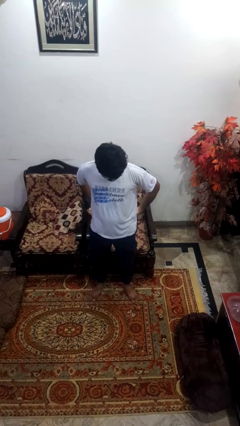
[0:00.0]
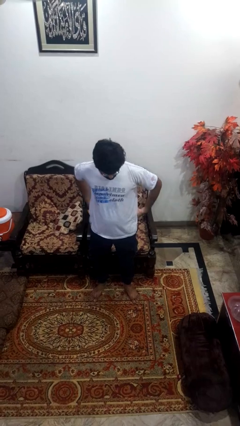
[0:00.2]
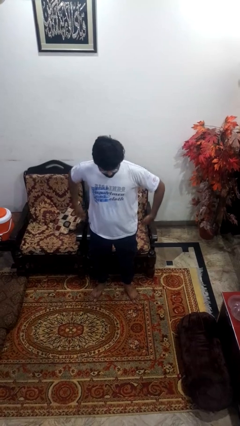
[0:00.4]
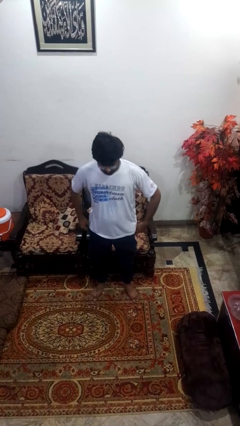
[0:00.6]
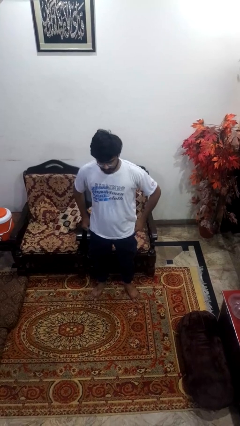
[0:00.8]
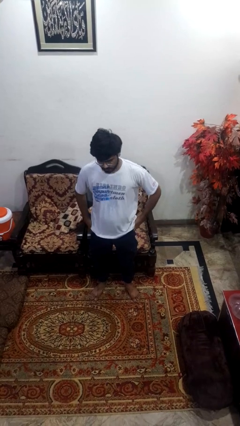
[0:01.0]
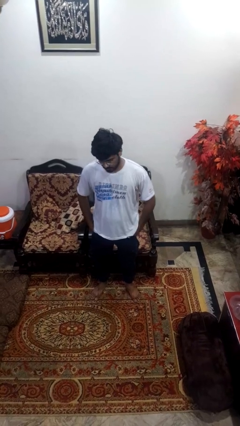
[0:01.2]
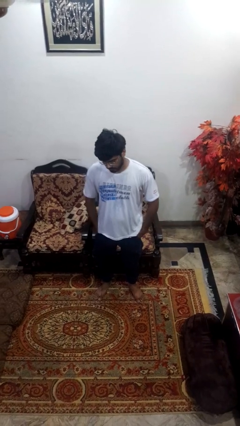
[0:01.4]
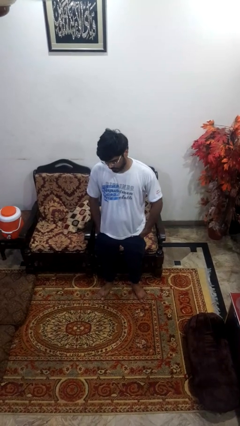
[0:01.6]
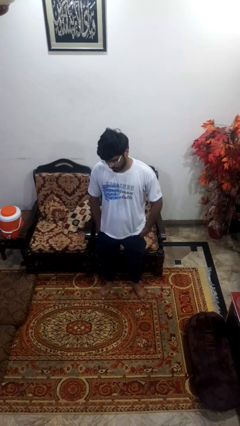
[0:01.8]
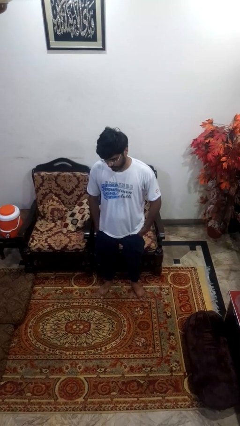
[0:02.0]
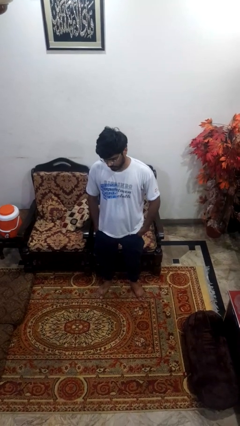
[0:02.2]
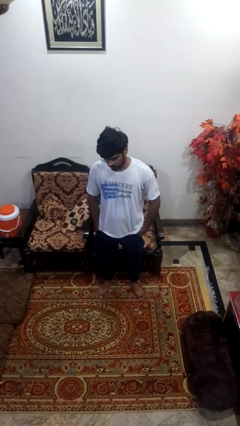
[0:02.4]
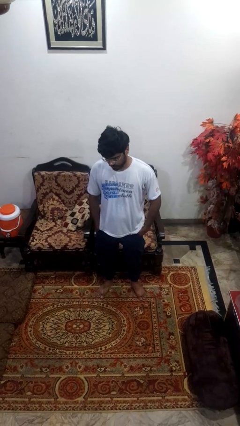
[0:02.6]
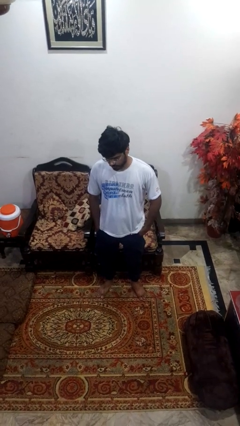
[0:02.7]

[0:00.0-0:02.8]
person puts hands in back pockets

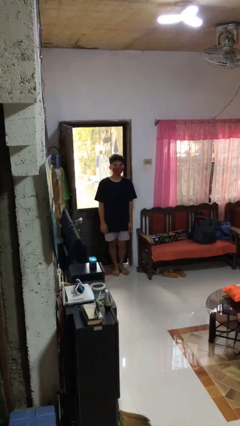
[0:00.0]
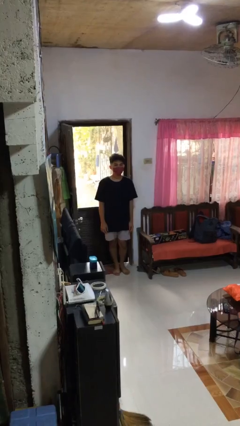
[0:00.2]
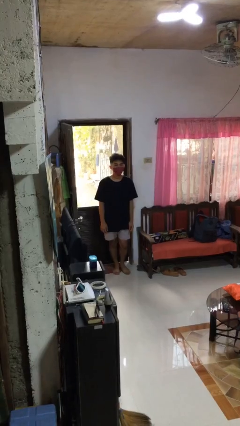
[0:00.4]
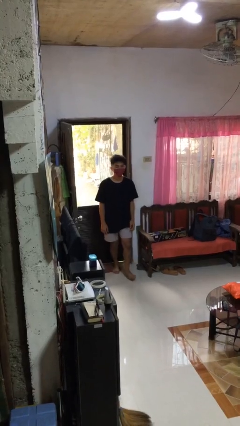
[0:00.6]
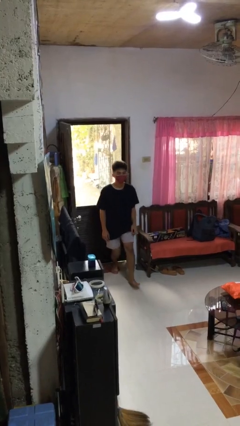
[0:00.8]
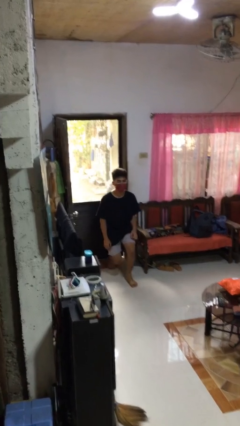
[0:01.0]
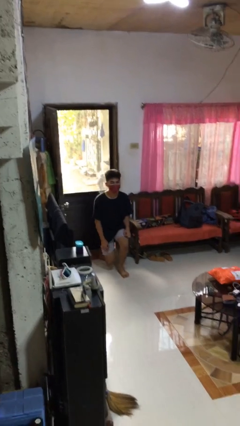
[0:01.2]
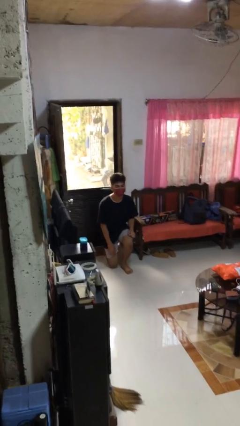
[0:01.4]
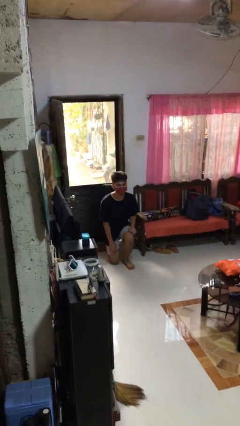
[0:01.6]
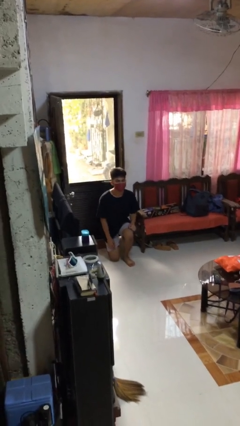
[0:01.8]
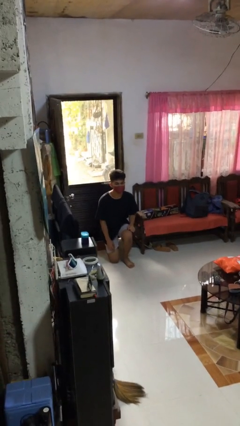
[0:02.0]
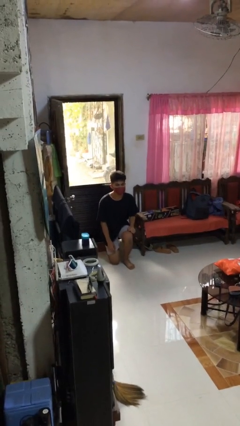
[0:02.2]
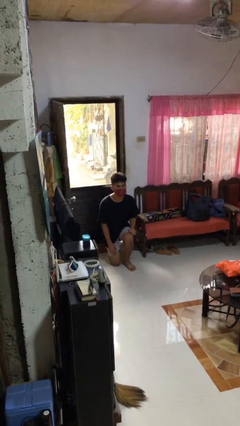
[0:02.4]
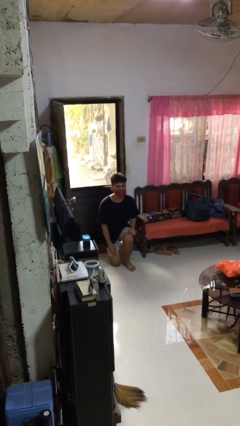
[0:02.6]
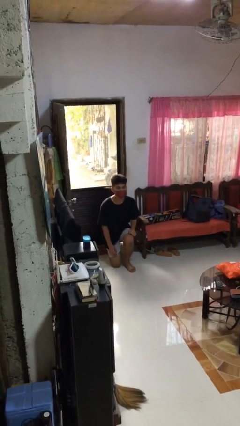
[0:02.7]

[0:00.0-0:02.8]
person kneels

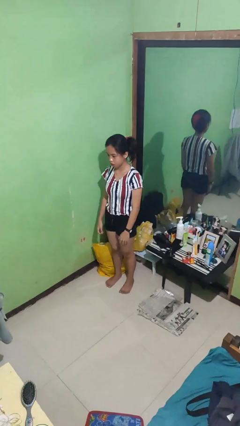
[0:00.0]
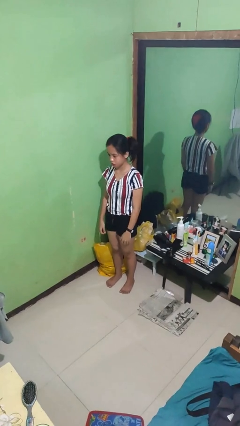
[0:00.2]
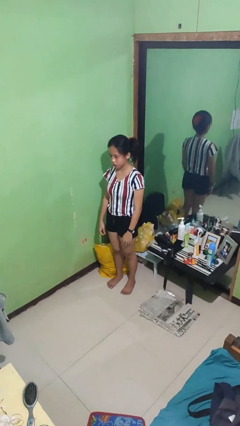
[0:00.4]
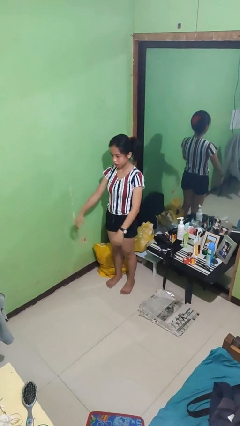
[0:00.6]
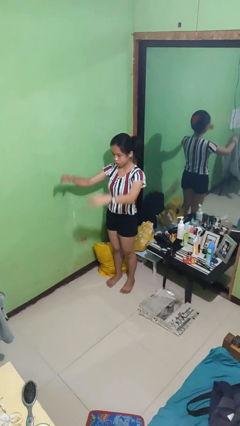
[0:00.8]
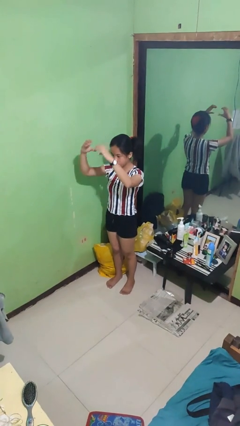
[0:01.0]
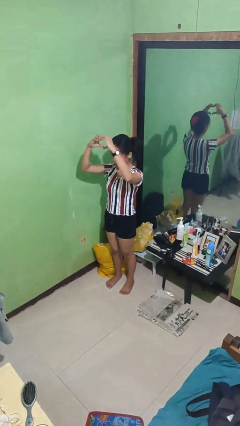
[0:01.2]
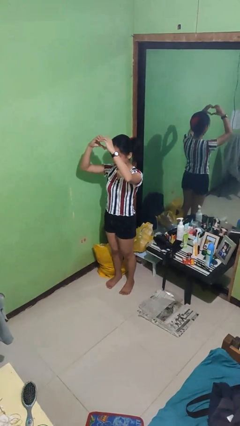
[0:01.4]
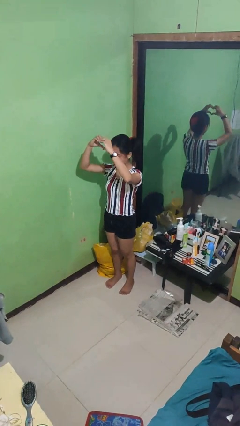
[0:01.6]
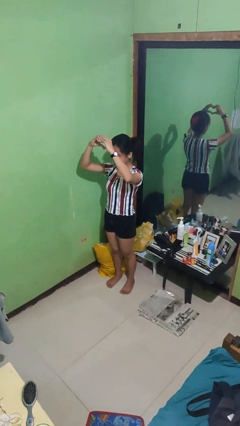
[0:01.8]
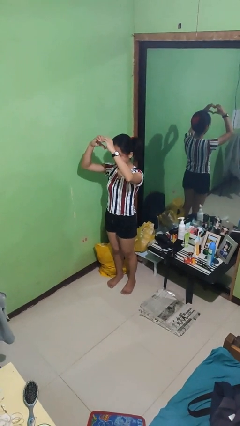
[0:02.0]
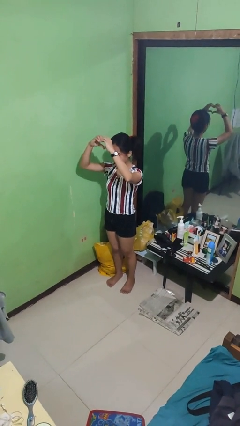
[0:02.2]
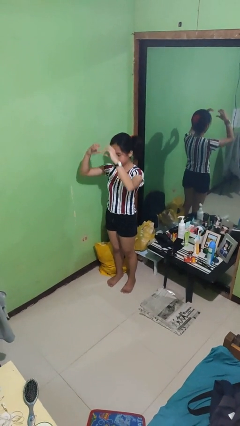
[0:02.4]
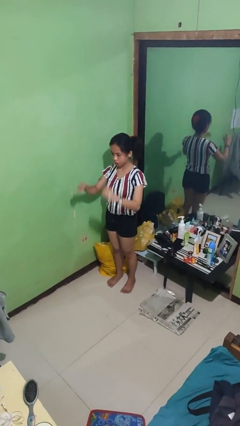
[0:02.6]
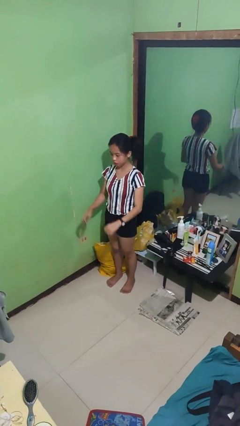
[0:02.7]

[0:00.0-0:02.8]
person gestures heart

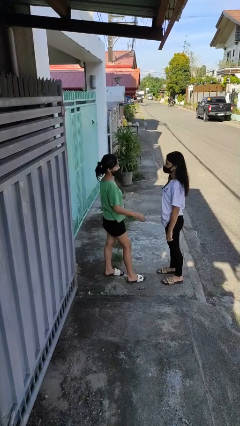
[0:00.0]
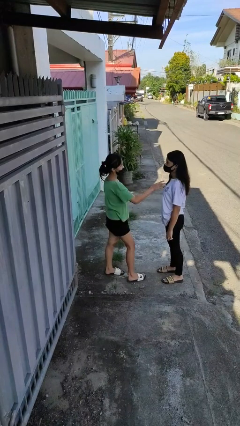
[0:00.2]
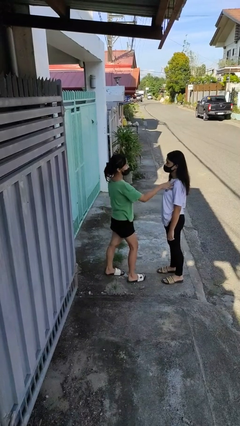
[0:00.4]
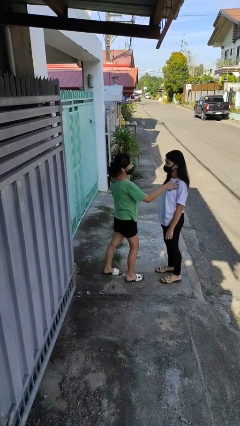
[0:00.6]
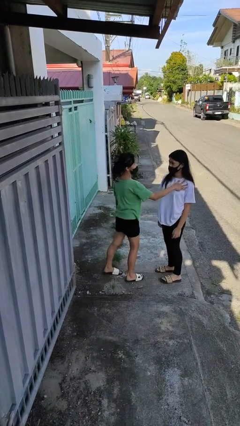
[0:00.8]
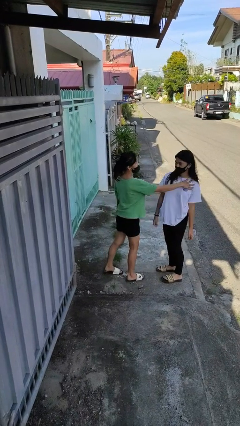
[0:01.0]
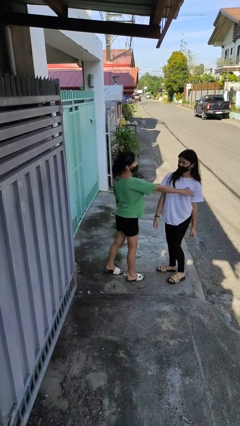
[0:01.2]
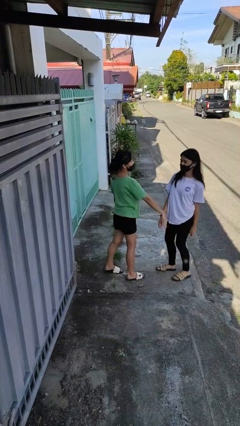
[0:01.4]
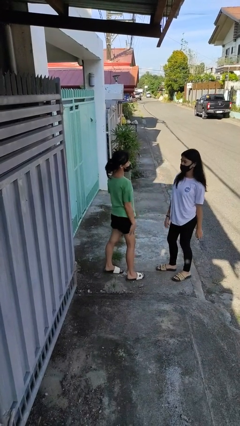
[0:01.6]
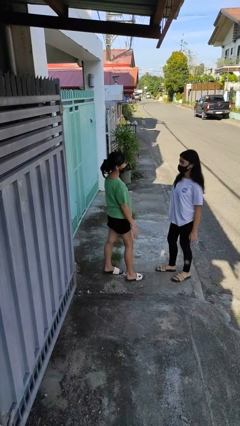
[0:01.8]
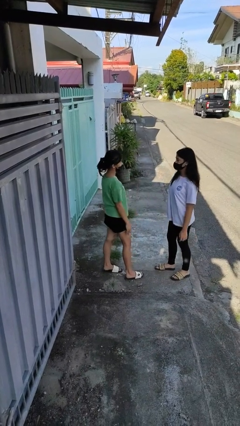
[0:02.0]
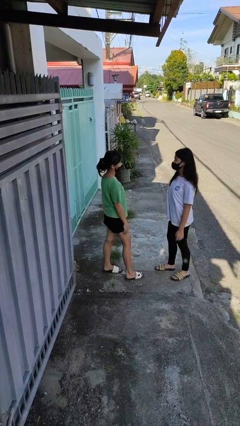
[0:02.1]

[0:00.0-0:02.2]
person shoves person

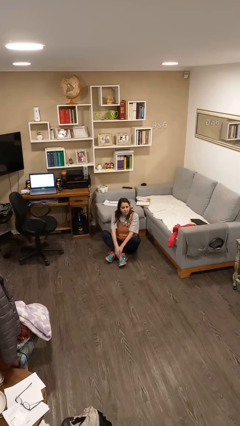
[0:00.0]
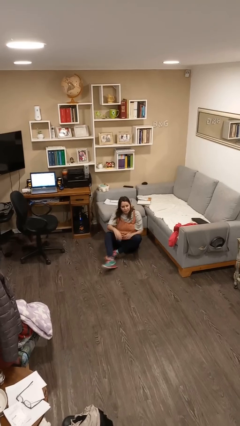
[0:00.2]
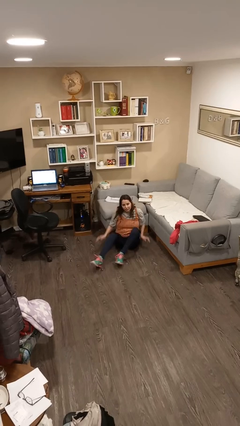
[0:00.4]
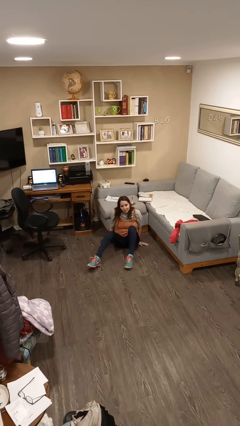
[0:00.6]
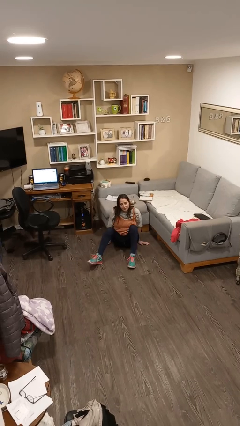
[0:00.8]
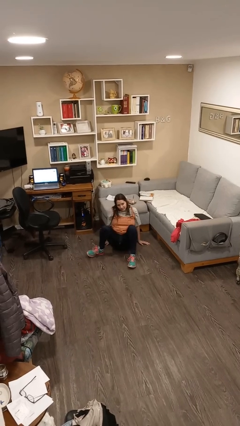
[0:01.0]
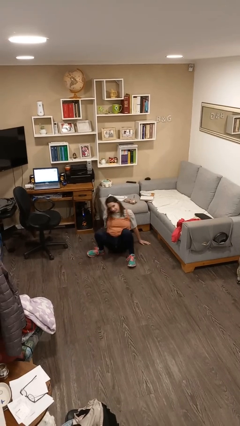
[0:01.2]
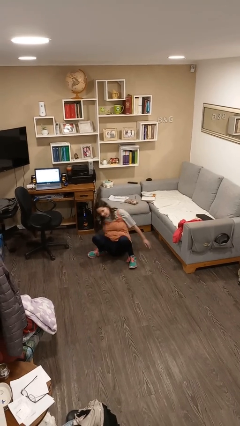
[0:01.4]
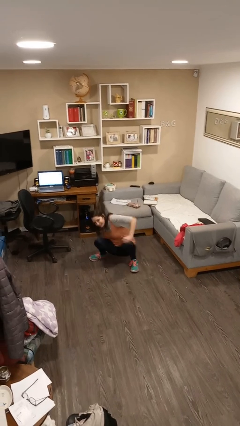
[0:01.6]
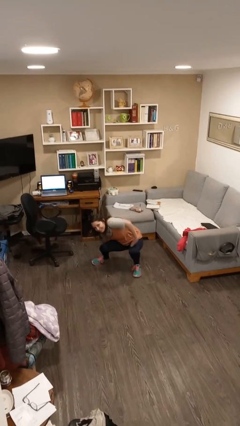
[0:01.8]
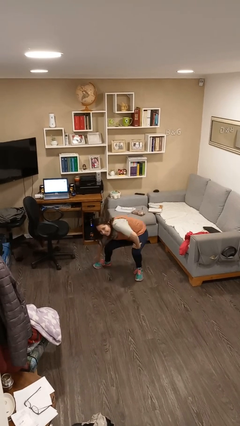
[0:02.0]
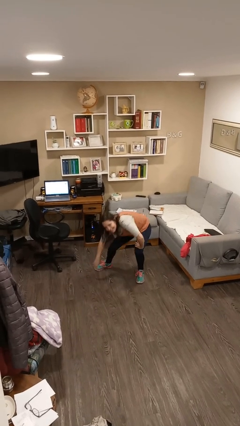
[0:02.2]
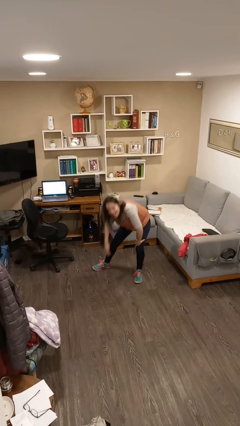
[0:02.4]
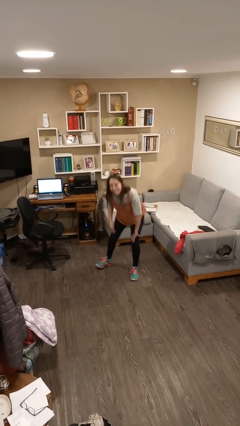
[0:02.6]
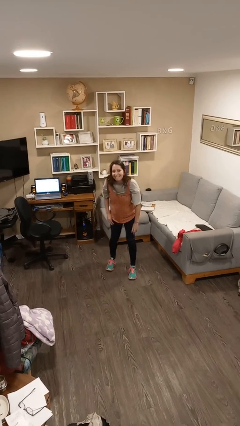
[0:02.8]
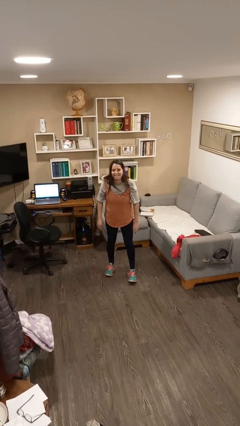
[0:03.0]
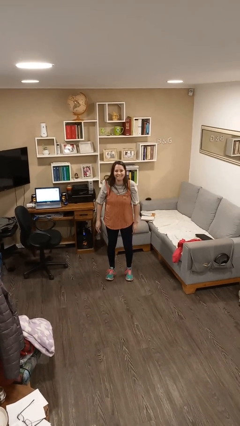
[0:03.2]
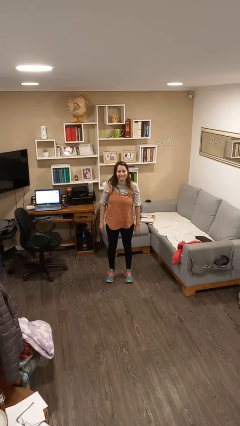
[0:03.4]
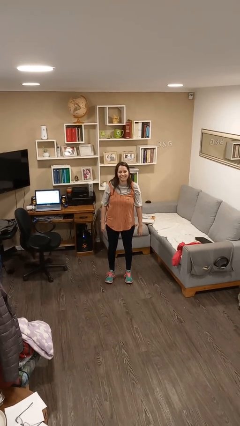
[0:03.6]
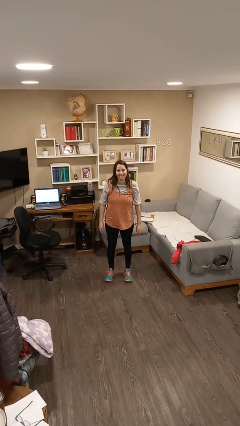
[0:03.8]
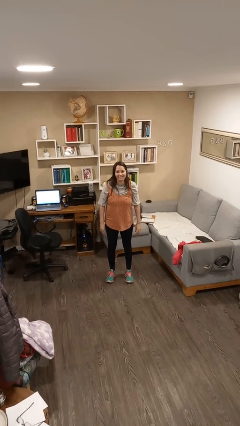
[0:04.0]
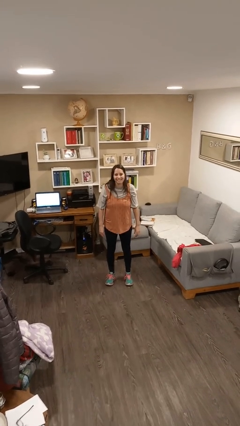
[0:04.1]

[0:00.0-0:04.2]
person stands up from floor

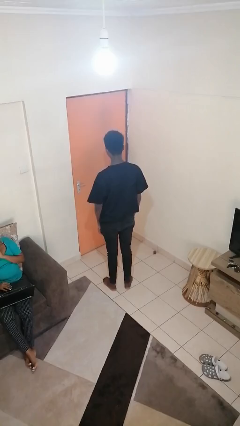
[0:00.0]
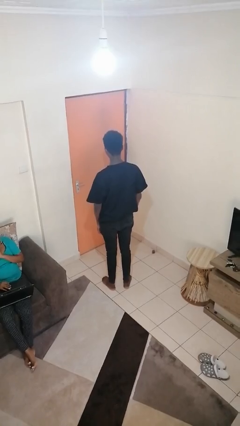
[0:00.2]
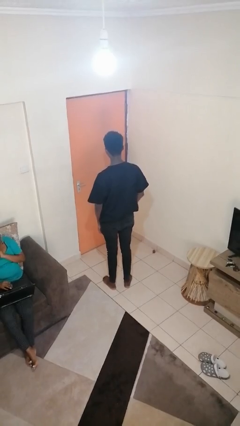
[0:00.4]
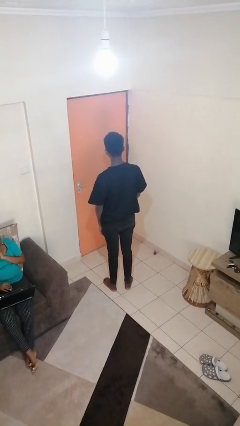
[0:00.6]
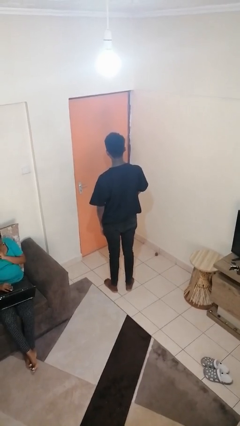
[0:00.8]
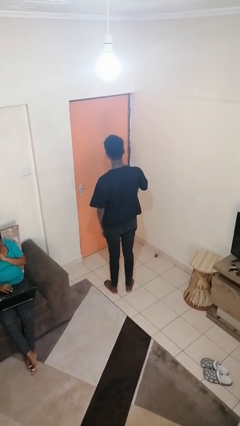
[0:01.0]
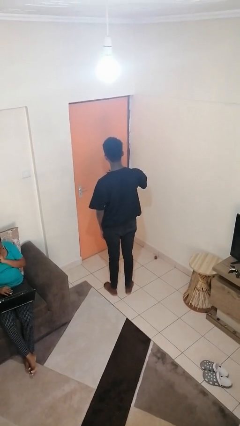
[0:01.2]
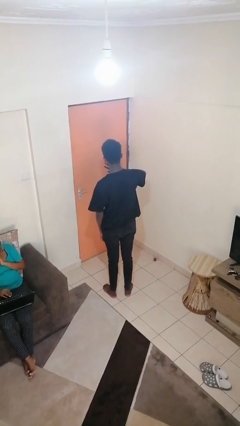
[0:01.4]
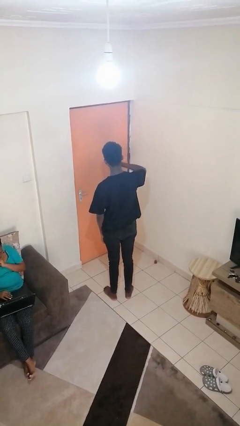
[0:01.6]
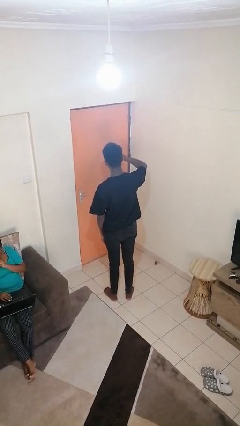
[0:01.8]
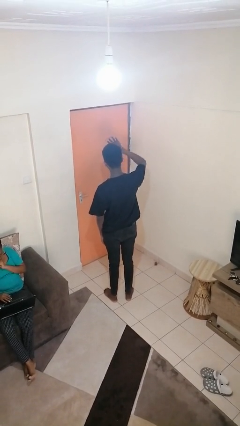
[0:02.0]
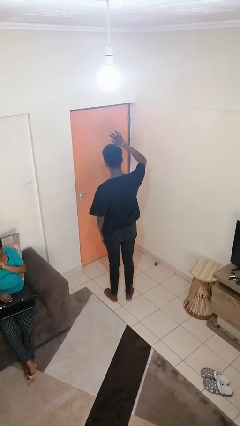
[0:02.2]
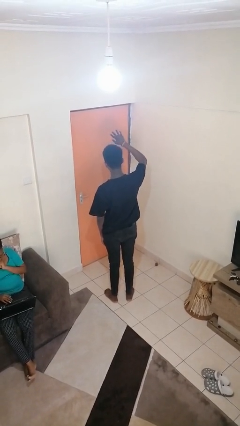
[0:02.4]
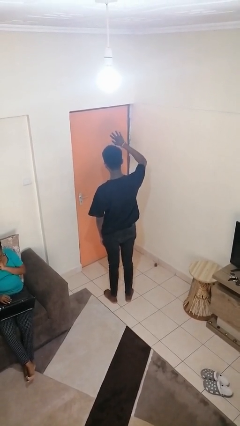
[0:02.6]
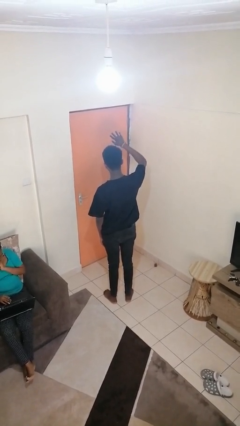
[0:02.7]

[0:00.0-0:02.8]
person gestures swipe up
